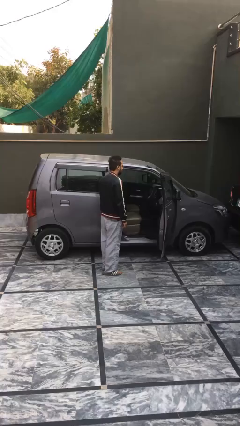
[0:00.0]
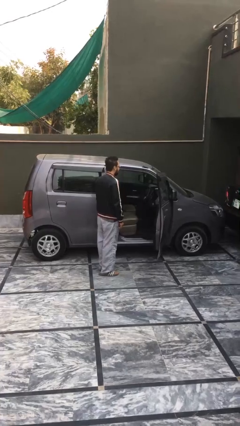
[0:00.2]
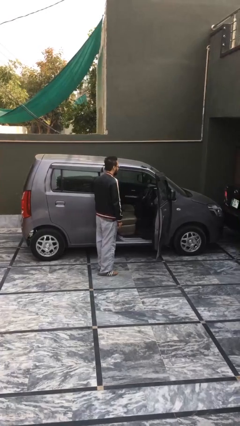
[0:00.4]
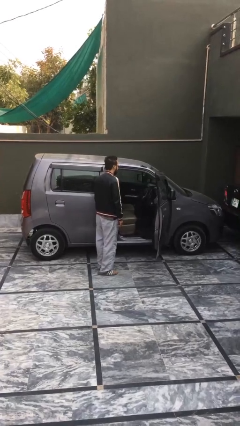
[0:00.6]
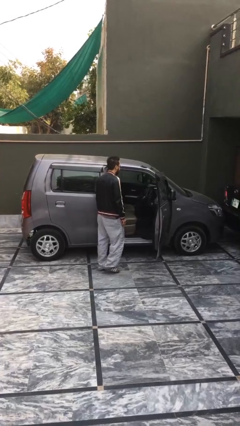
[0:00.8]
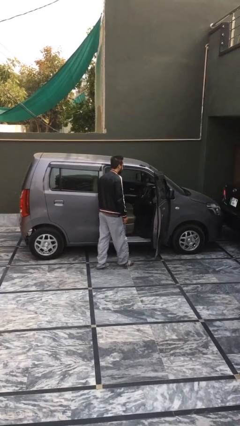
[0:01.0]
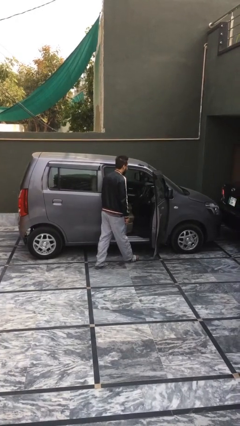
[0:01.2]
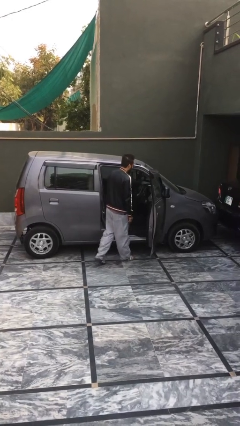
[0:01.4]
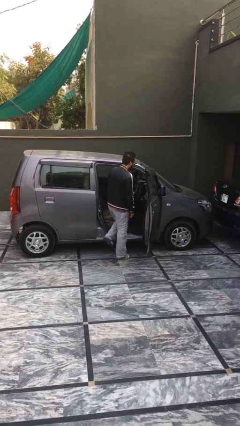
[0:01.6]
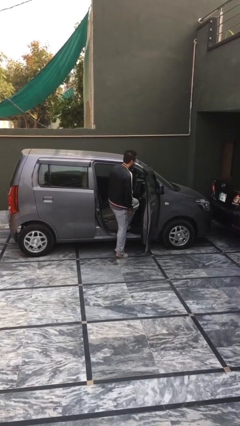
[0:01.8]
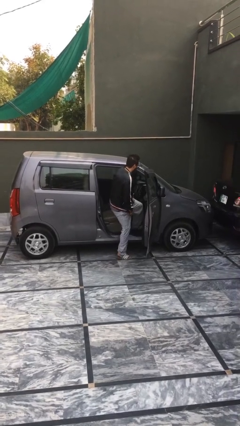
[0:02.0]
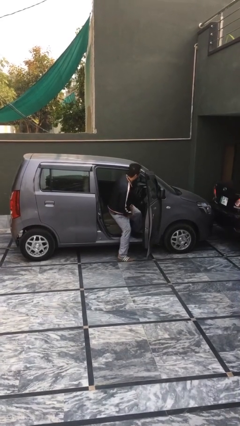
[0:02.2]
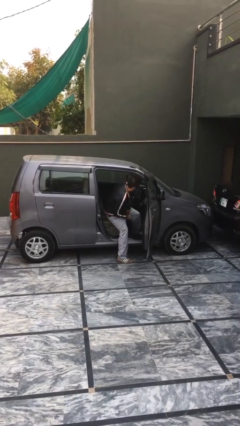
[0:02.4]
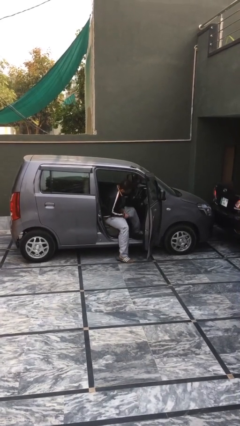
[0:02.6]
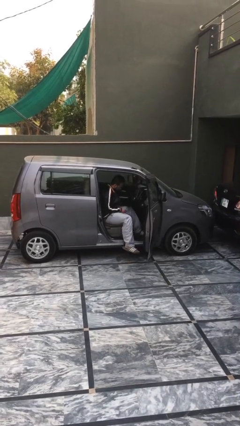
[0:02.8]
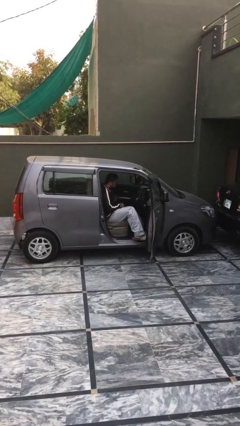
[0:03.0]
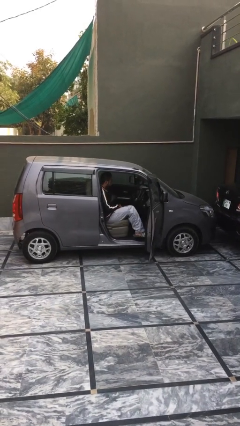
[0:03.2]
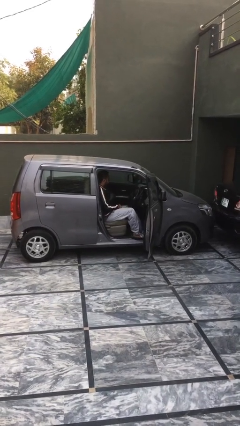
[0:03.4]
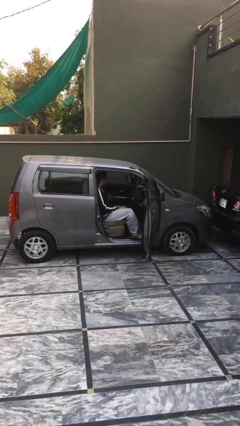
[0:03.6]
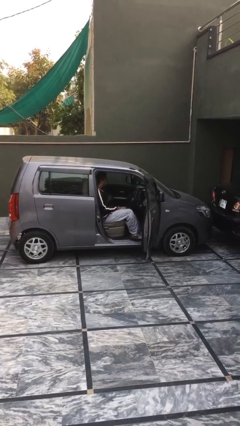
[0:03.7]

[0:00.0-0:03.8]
person enters car

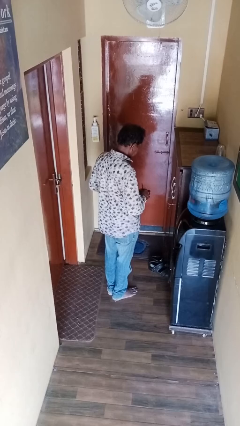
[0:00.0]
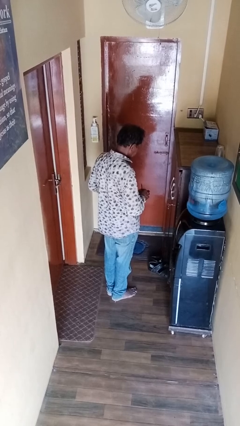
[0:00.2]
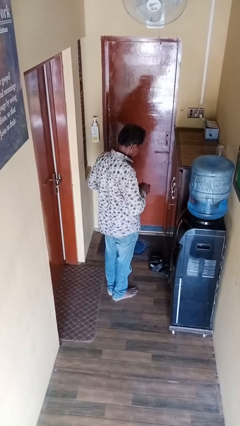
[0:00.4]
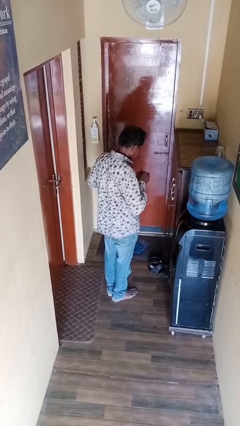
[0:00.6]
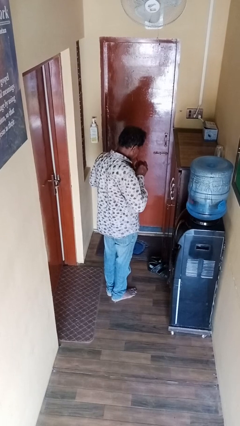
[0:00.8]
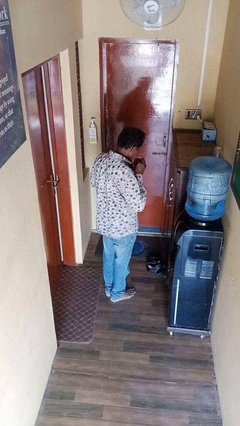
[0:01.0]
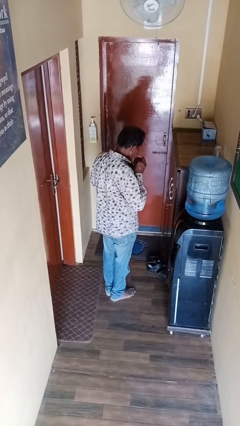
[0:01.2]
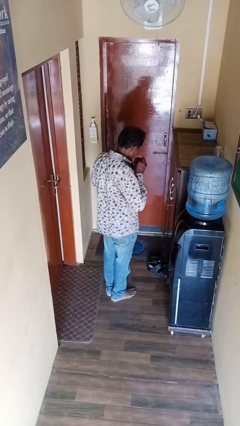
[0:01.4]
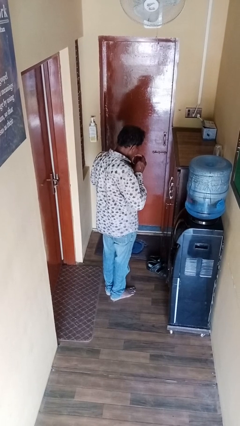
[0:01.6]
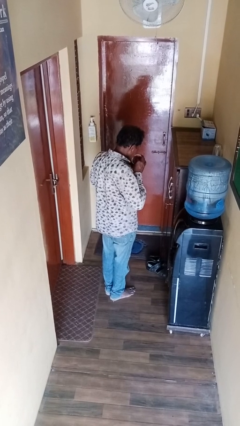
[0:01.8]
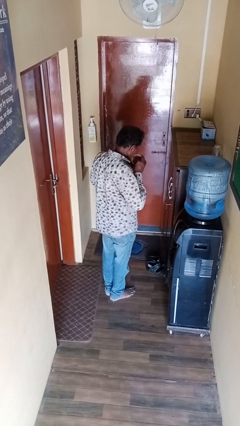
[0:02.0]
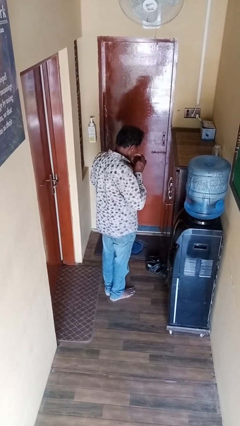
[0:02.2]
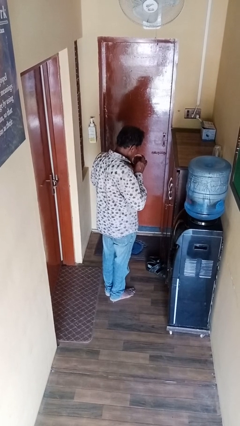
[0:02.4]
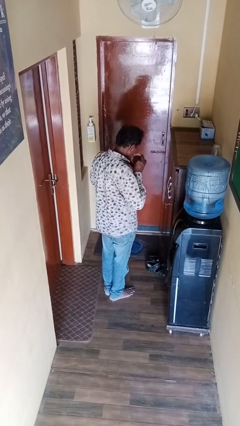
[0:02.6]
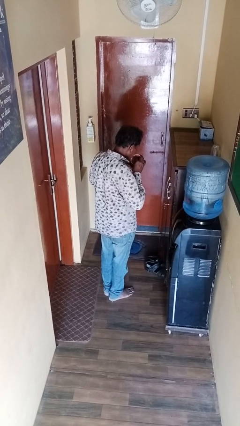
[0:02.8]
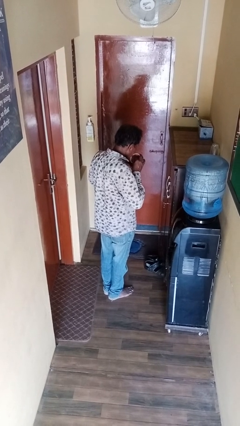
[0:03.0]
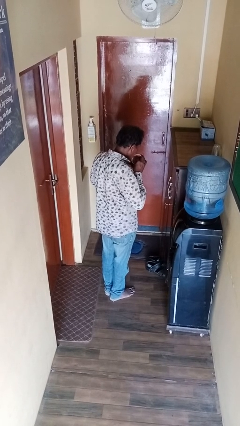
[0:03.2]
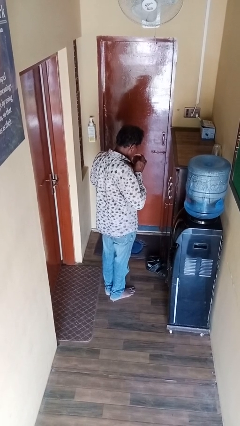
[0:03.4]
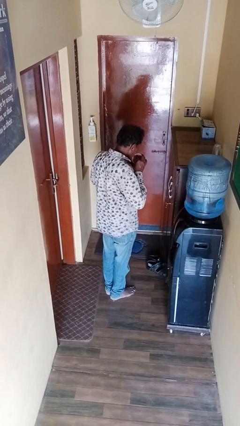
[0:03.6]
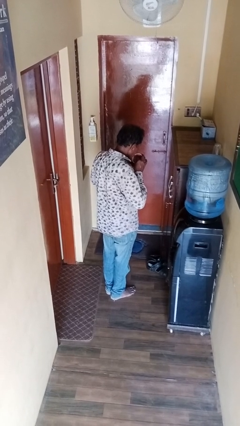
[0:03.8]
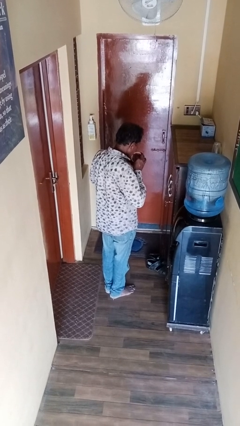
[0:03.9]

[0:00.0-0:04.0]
person drinks from straw

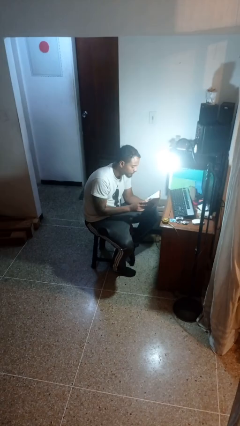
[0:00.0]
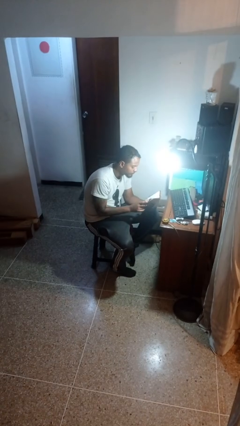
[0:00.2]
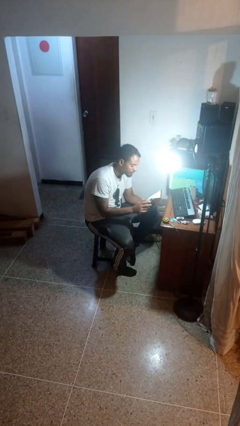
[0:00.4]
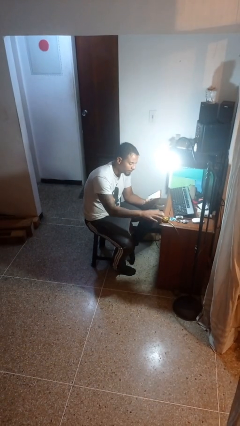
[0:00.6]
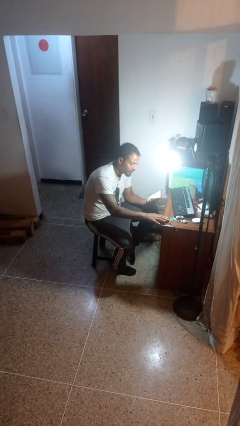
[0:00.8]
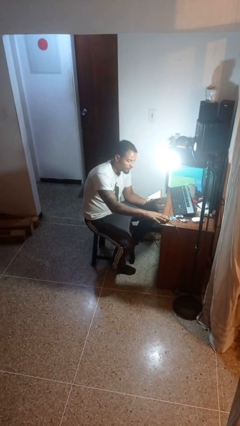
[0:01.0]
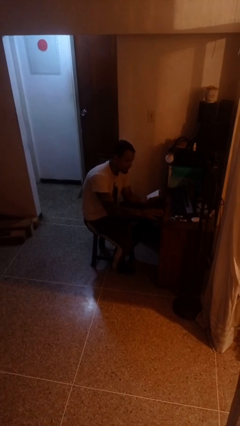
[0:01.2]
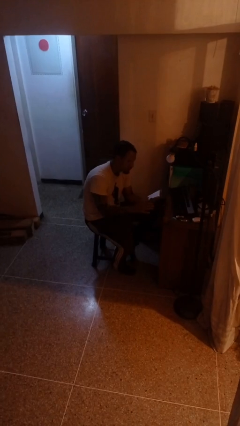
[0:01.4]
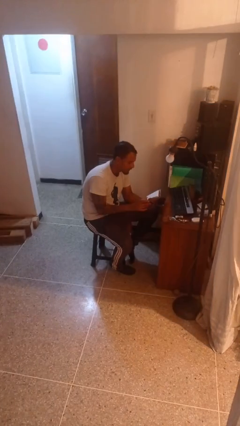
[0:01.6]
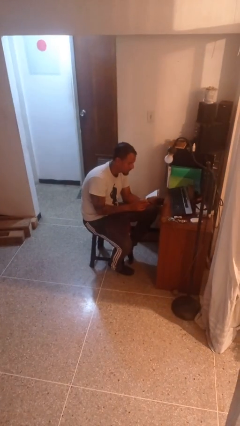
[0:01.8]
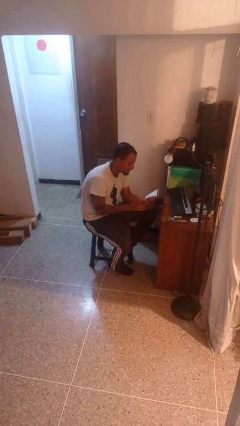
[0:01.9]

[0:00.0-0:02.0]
person turns off lamp

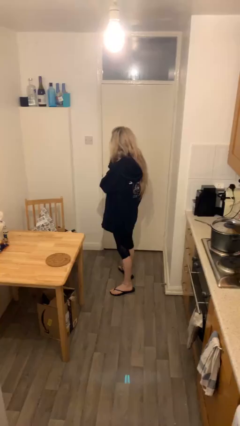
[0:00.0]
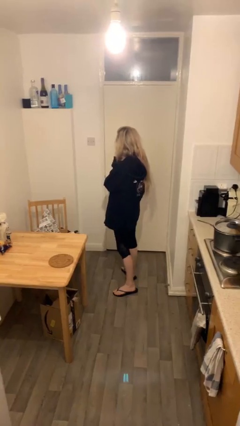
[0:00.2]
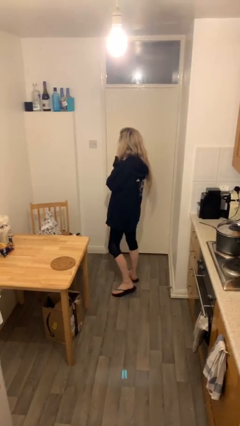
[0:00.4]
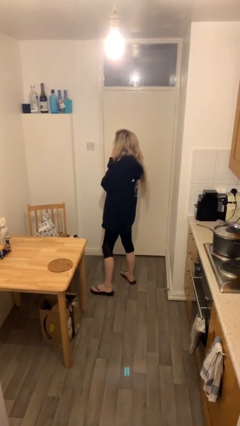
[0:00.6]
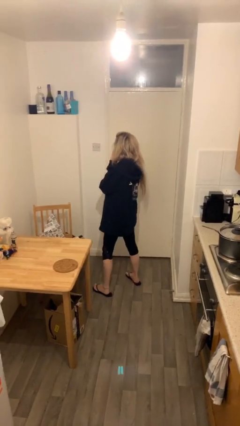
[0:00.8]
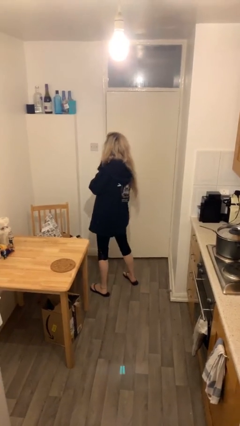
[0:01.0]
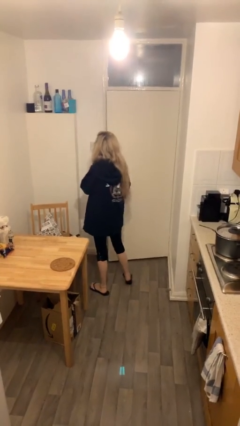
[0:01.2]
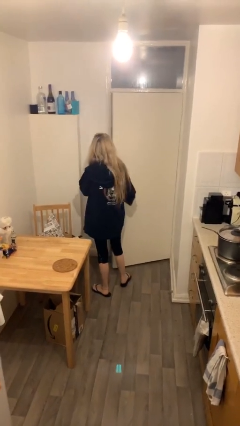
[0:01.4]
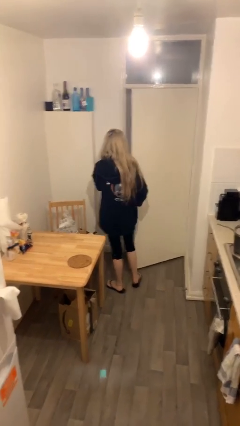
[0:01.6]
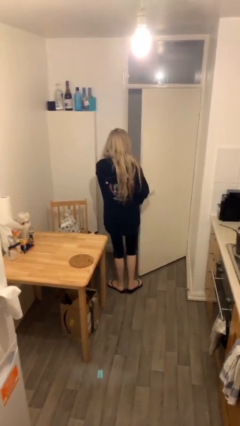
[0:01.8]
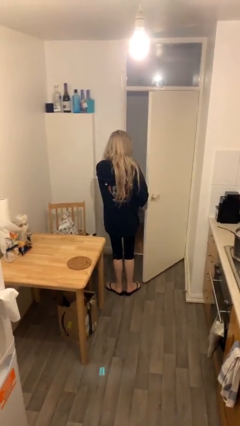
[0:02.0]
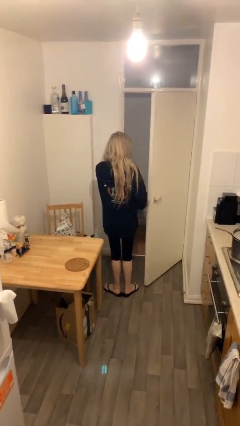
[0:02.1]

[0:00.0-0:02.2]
person opens facility door

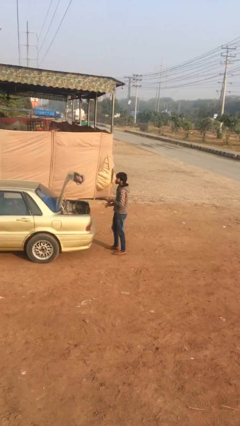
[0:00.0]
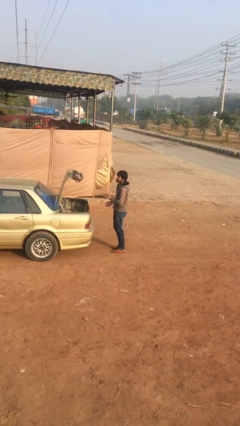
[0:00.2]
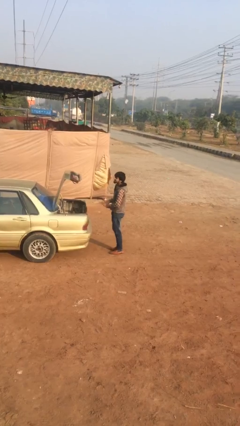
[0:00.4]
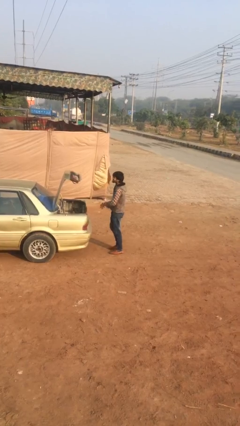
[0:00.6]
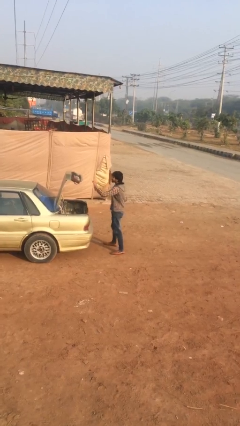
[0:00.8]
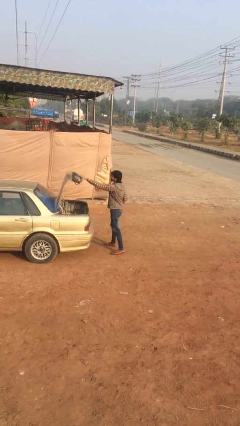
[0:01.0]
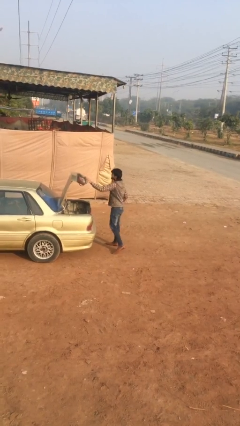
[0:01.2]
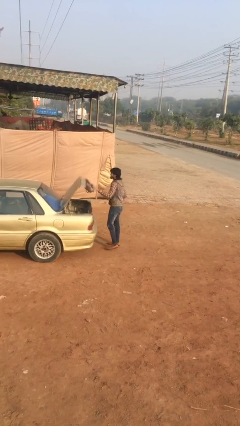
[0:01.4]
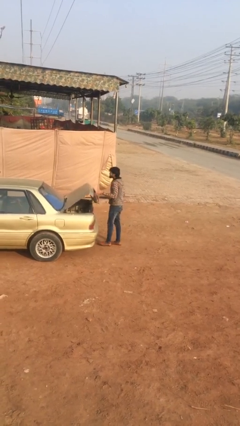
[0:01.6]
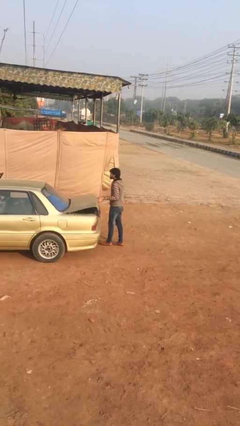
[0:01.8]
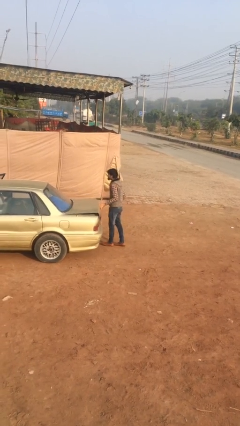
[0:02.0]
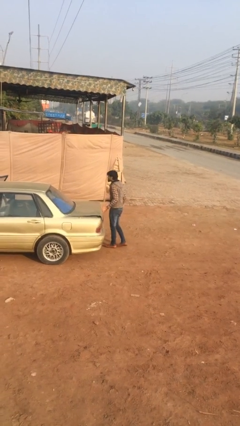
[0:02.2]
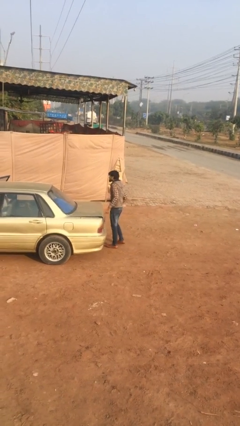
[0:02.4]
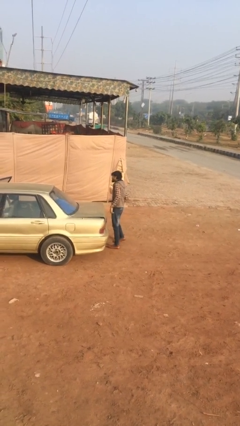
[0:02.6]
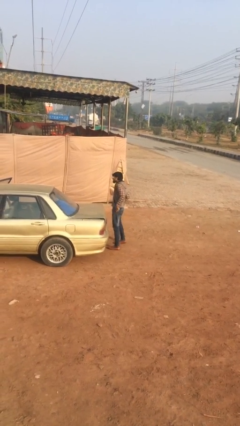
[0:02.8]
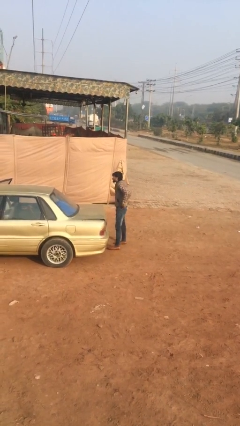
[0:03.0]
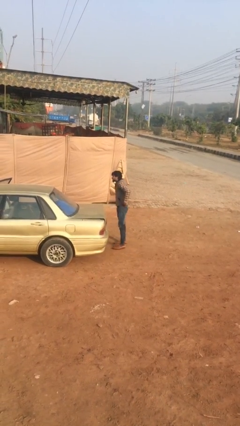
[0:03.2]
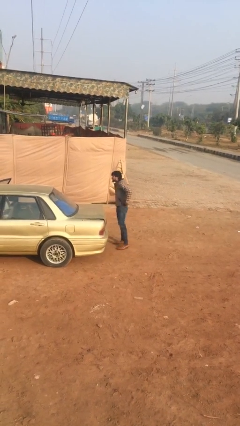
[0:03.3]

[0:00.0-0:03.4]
person closes car trunk

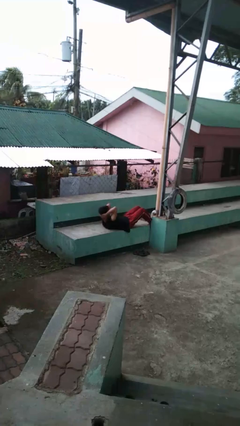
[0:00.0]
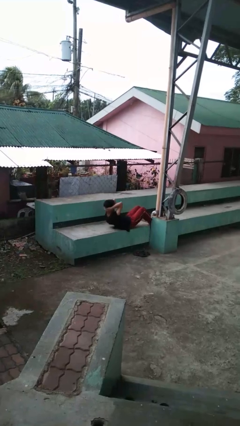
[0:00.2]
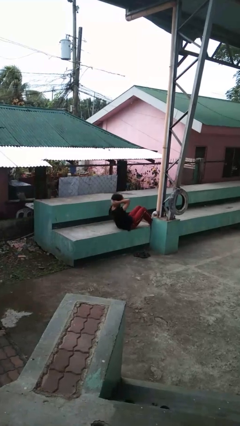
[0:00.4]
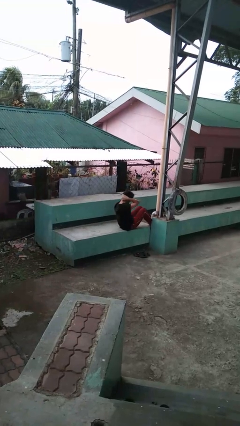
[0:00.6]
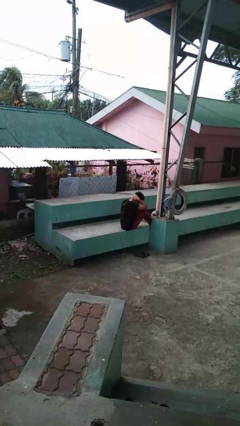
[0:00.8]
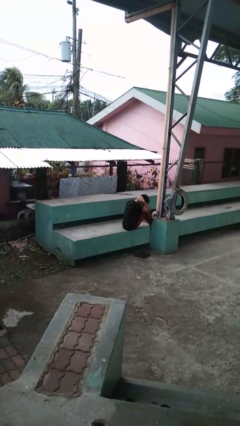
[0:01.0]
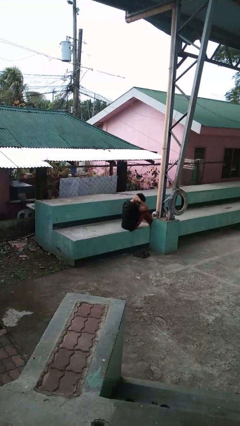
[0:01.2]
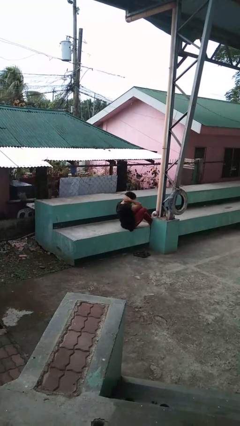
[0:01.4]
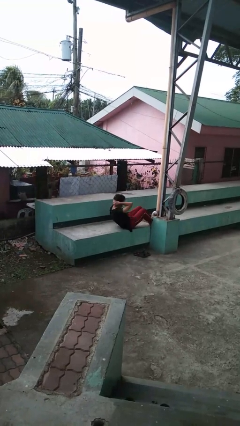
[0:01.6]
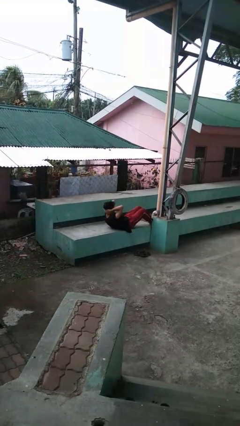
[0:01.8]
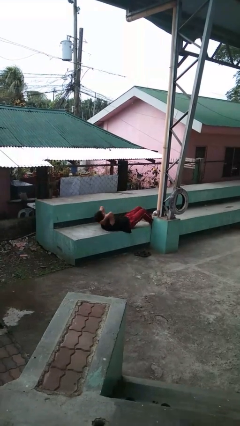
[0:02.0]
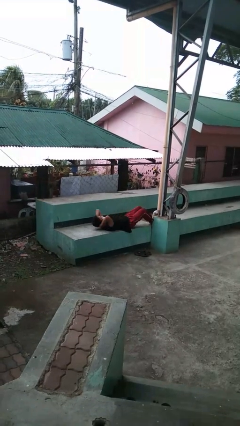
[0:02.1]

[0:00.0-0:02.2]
person exercises with situp

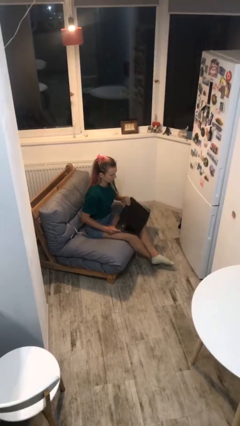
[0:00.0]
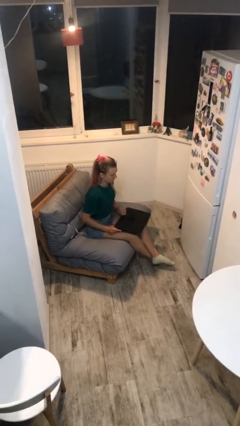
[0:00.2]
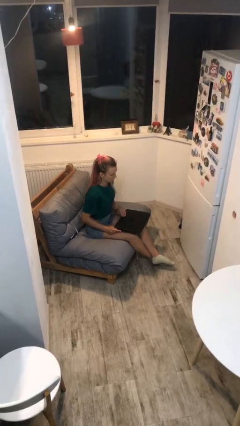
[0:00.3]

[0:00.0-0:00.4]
person closes laptop
